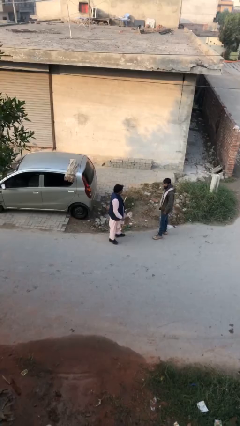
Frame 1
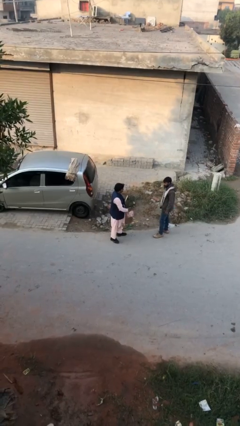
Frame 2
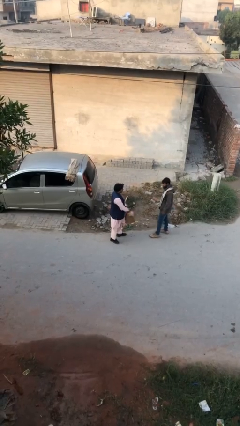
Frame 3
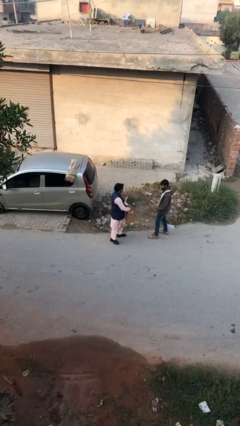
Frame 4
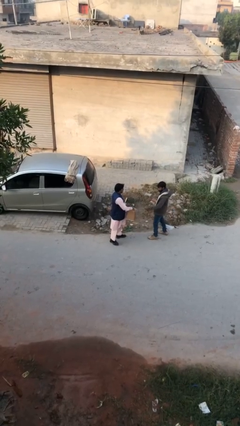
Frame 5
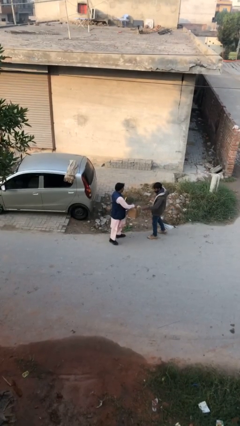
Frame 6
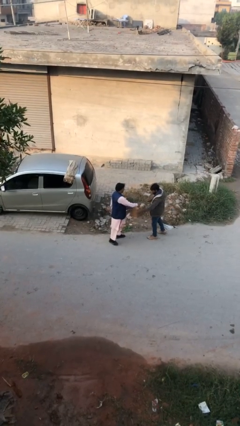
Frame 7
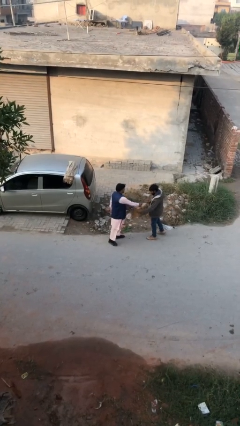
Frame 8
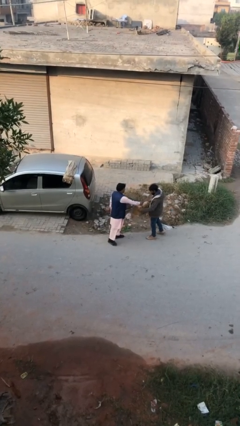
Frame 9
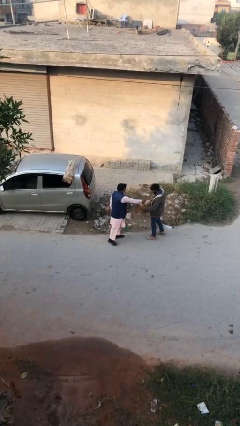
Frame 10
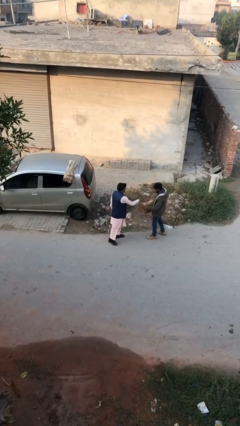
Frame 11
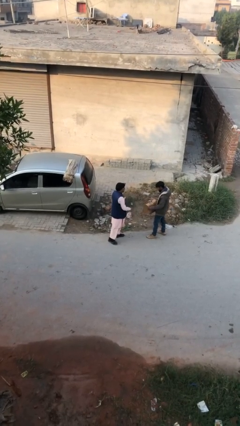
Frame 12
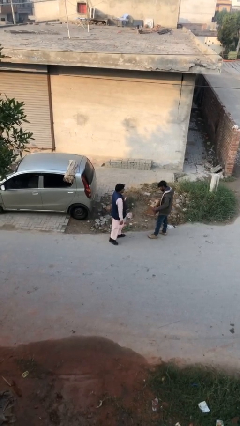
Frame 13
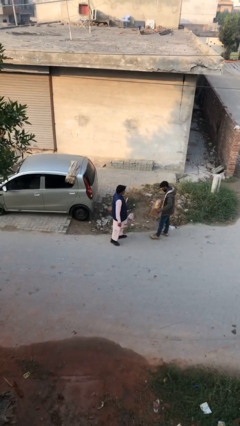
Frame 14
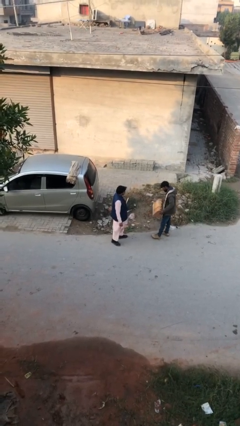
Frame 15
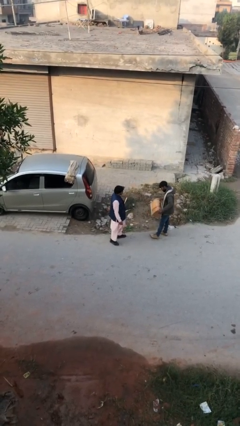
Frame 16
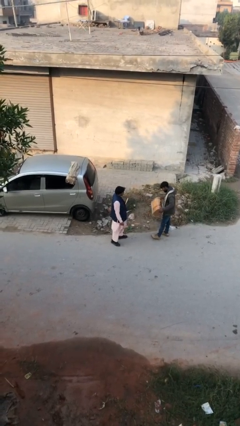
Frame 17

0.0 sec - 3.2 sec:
person transfers object to person

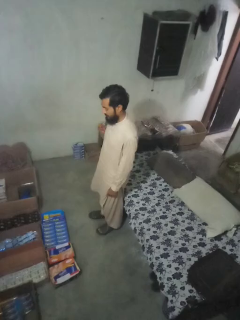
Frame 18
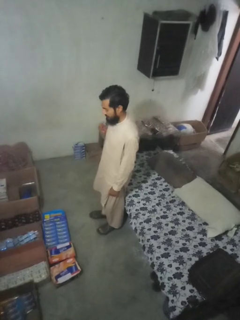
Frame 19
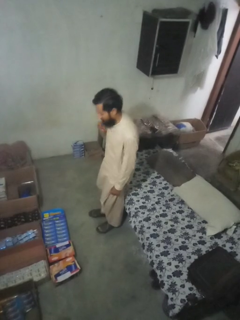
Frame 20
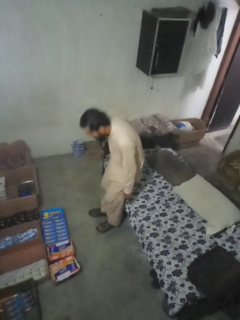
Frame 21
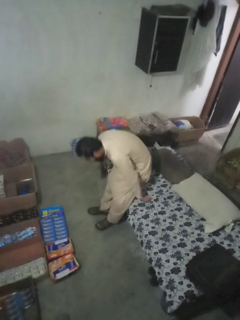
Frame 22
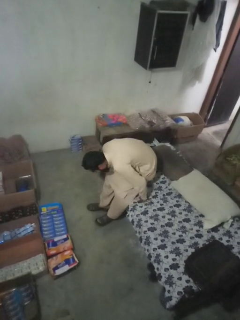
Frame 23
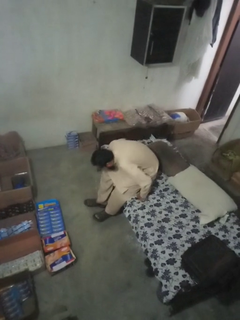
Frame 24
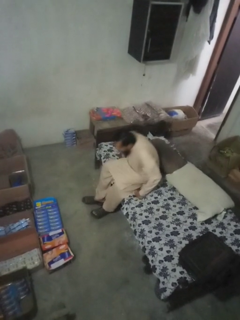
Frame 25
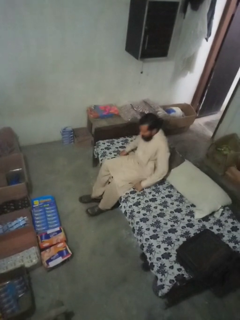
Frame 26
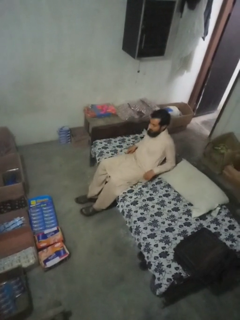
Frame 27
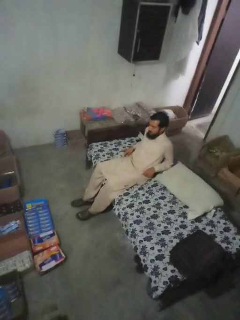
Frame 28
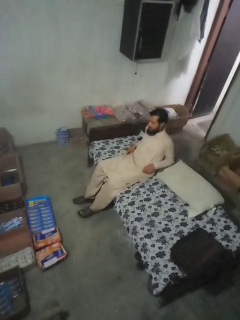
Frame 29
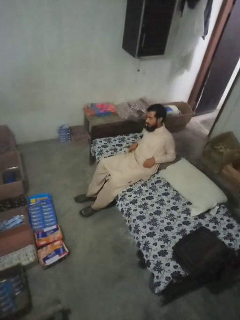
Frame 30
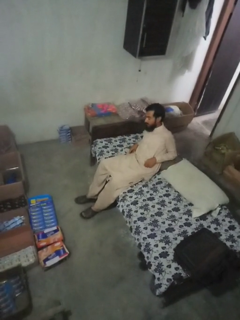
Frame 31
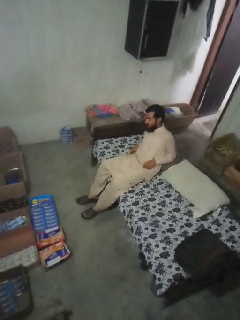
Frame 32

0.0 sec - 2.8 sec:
person lies down on couch

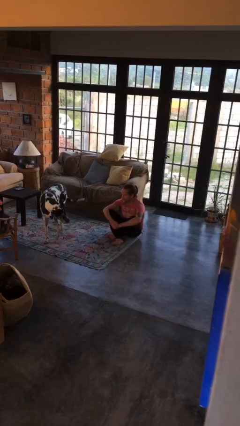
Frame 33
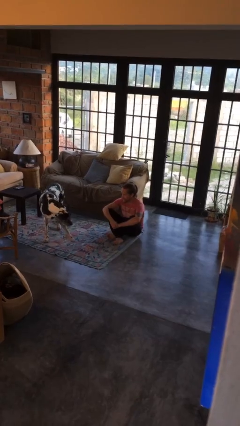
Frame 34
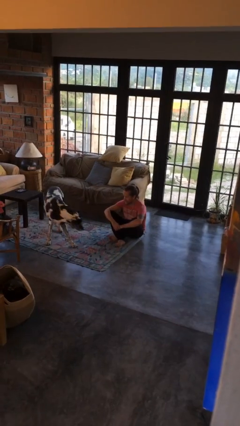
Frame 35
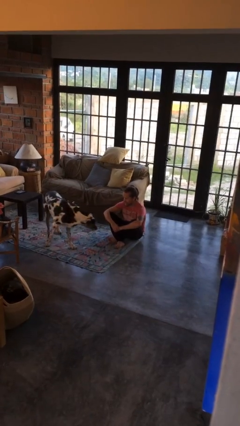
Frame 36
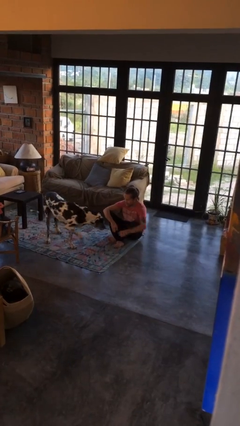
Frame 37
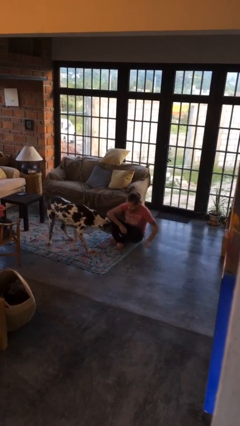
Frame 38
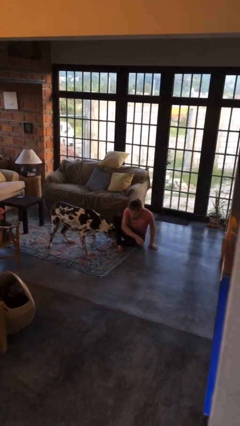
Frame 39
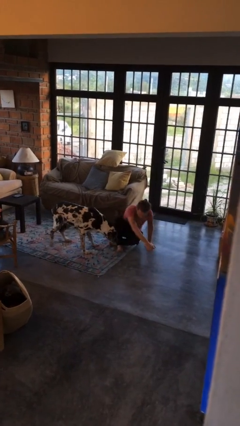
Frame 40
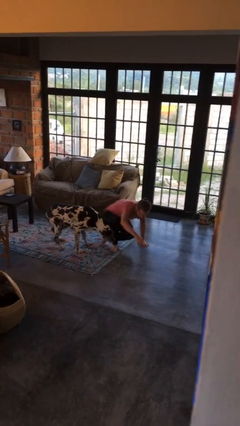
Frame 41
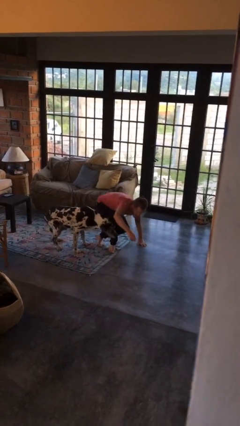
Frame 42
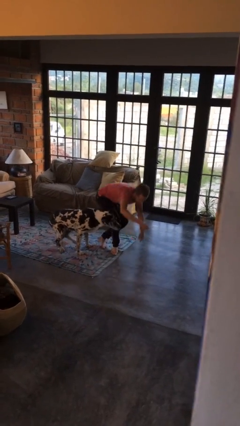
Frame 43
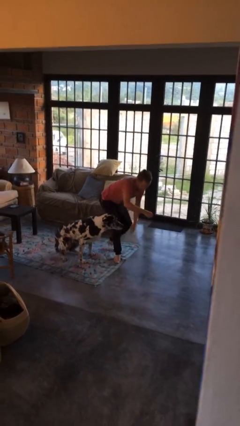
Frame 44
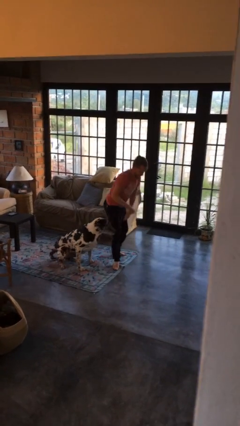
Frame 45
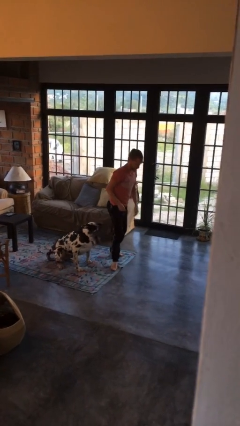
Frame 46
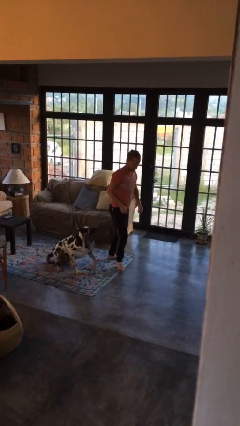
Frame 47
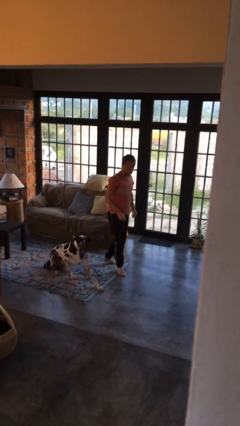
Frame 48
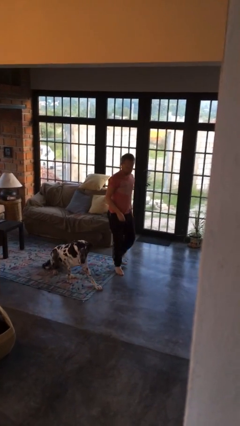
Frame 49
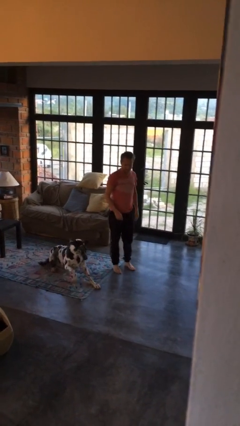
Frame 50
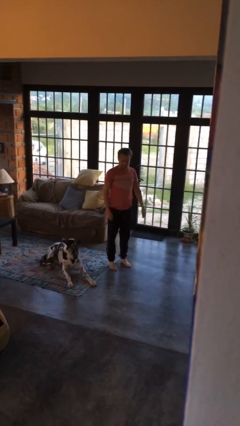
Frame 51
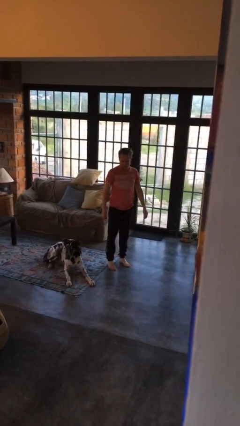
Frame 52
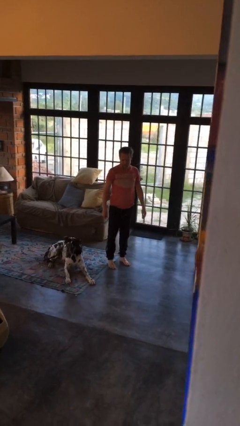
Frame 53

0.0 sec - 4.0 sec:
person stands up from floor

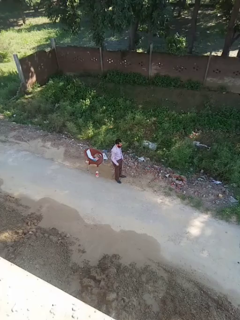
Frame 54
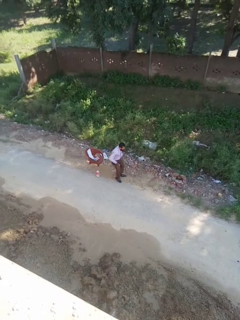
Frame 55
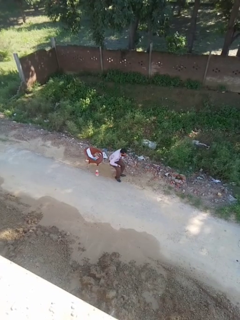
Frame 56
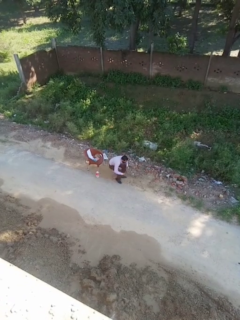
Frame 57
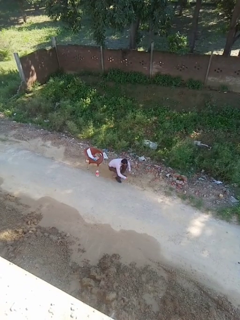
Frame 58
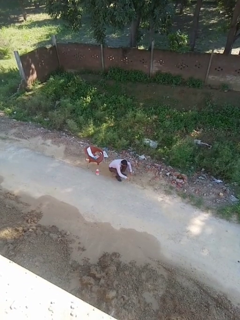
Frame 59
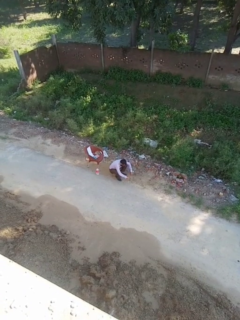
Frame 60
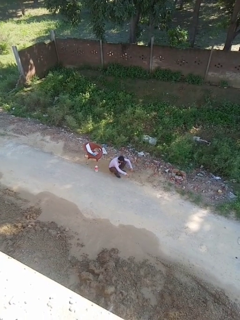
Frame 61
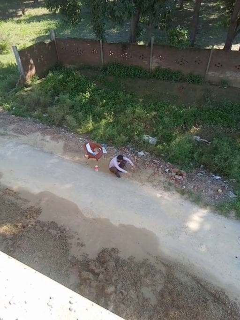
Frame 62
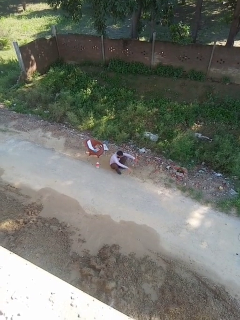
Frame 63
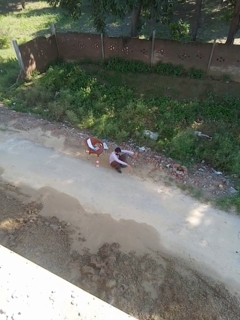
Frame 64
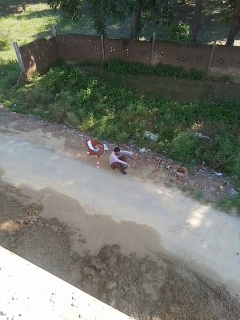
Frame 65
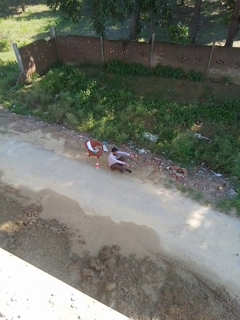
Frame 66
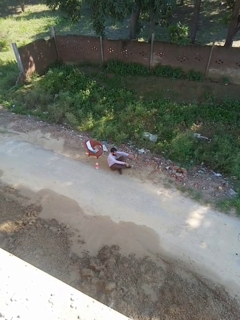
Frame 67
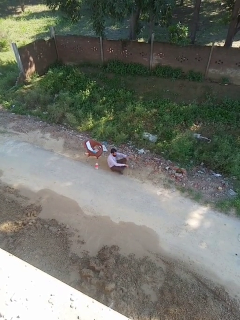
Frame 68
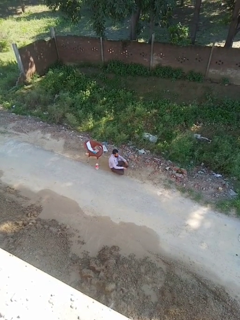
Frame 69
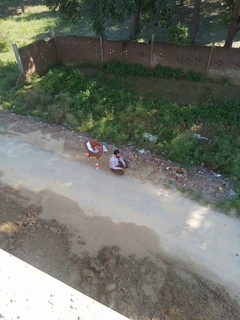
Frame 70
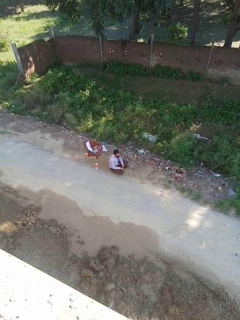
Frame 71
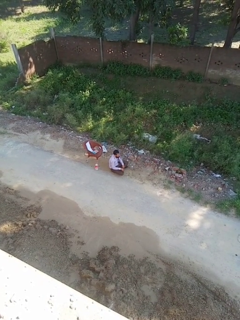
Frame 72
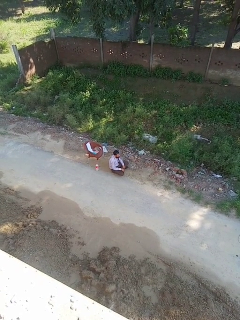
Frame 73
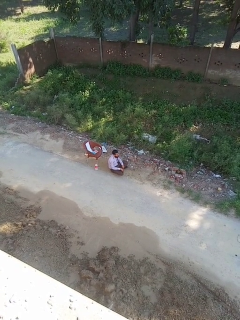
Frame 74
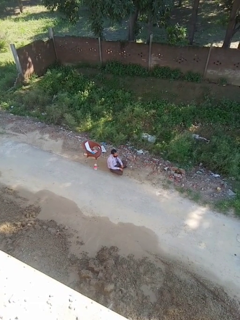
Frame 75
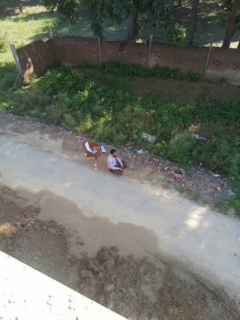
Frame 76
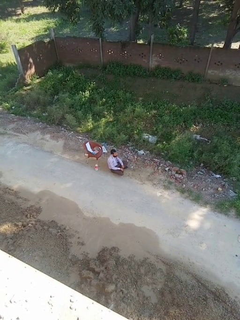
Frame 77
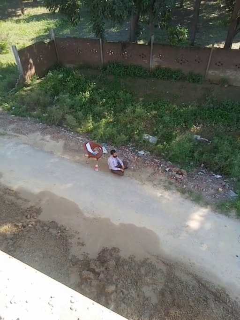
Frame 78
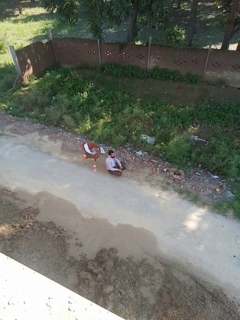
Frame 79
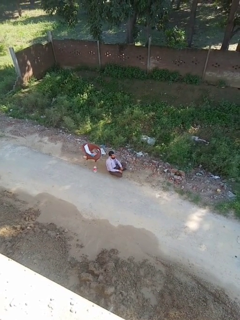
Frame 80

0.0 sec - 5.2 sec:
person sits crisscross

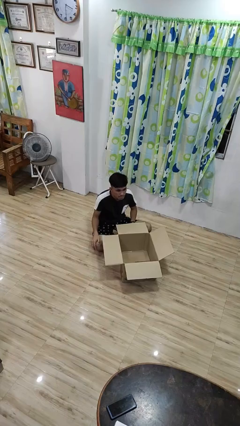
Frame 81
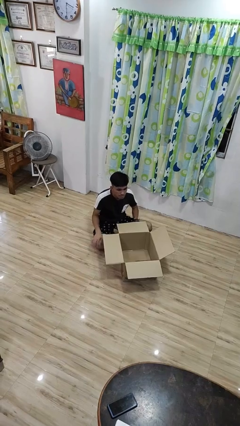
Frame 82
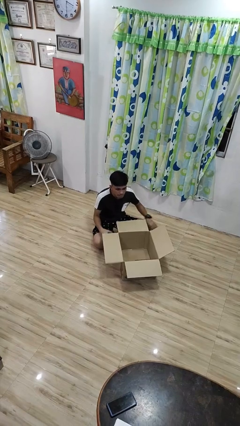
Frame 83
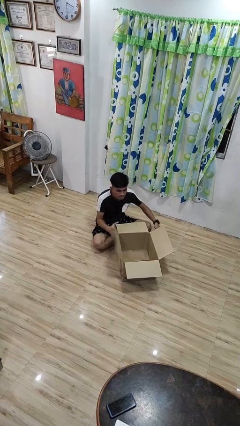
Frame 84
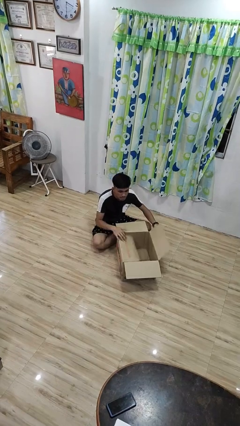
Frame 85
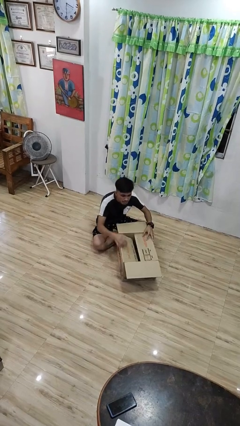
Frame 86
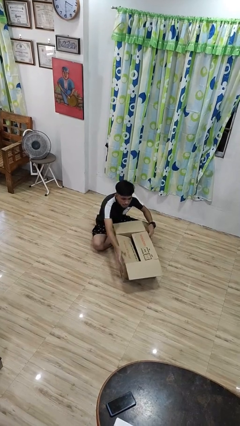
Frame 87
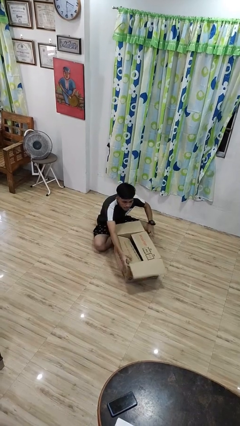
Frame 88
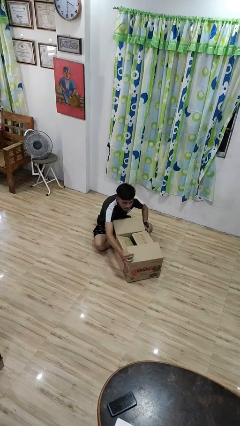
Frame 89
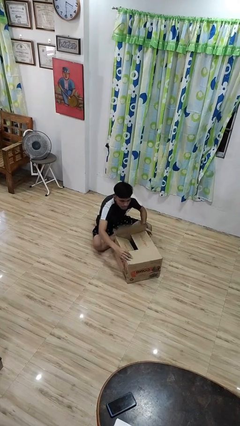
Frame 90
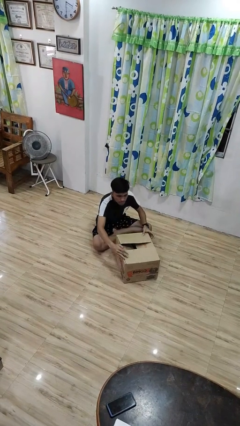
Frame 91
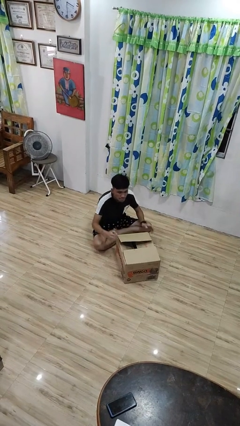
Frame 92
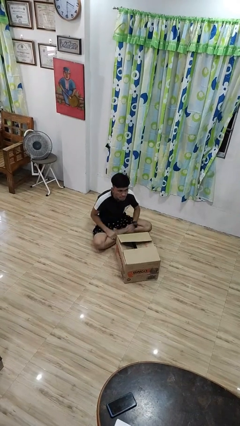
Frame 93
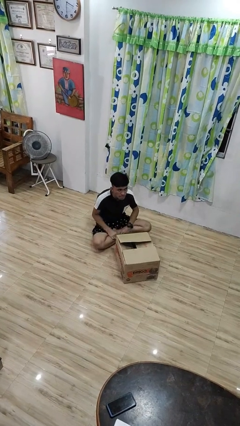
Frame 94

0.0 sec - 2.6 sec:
person closes box

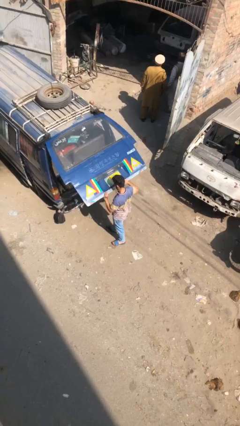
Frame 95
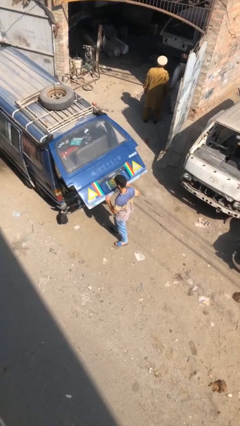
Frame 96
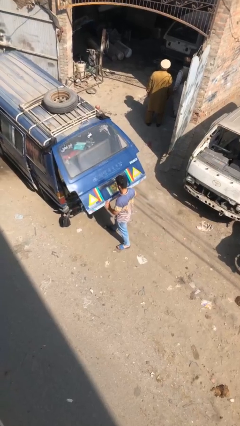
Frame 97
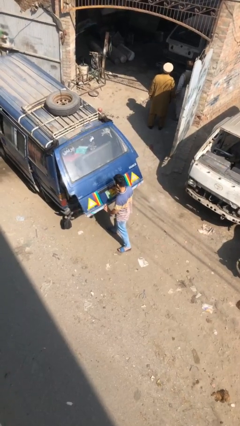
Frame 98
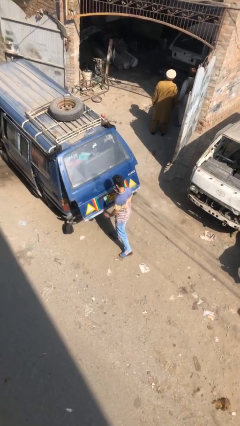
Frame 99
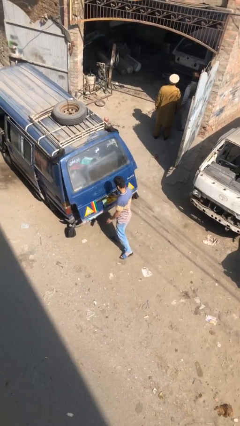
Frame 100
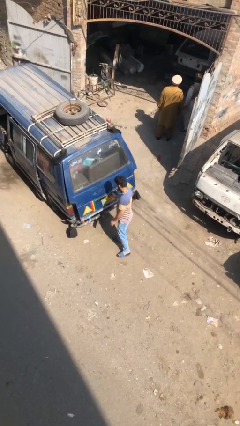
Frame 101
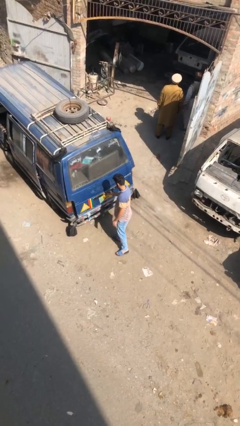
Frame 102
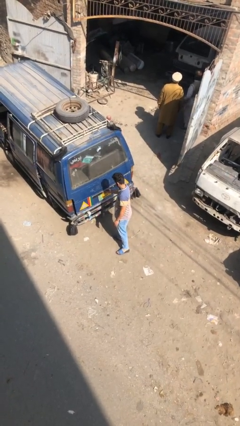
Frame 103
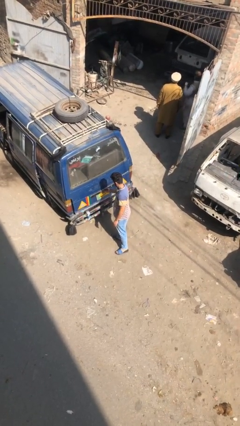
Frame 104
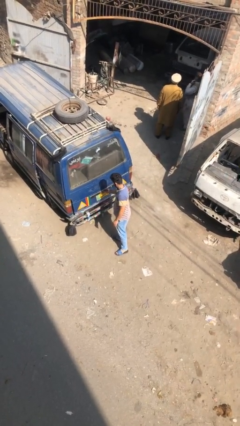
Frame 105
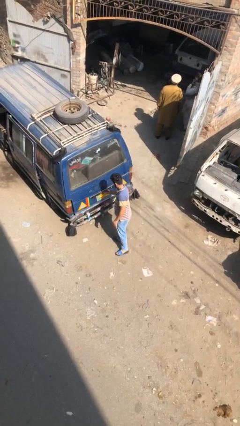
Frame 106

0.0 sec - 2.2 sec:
person closes car trunk
